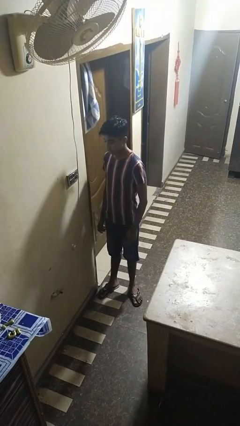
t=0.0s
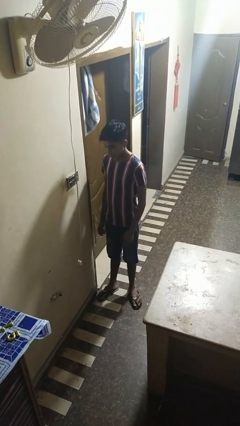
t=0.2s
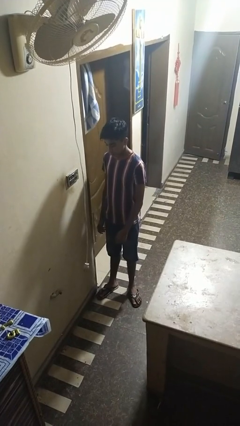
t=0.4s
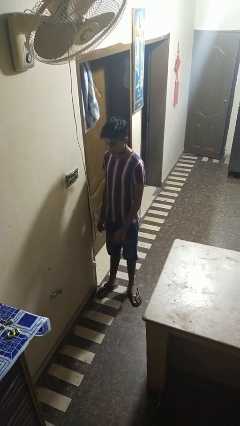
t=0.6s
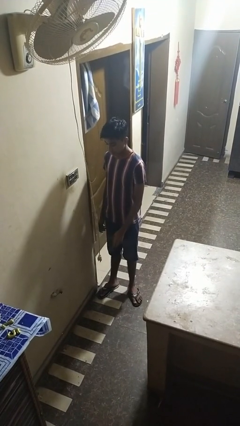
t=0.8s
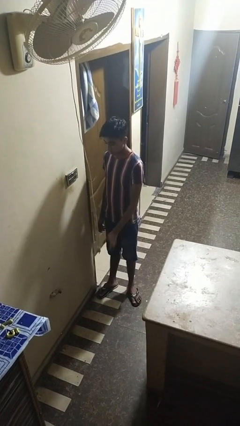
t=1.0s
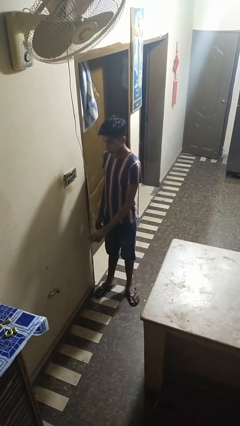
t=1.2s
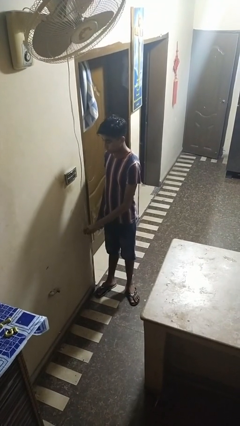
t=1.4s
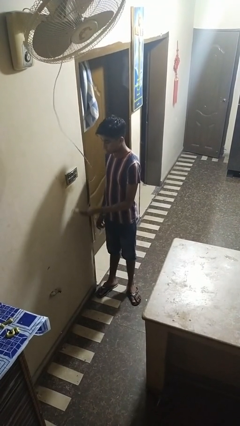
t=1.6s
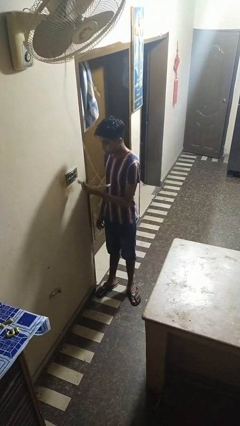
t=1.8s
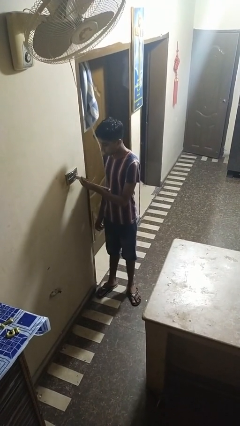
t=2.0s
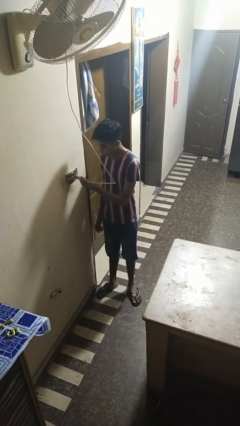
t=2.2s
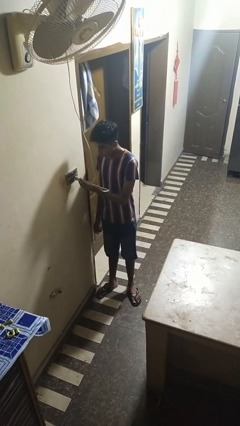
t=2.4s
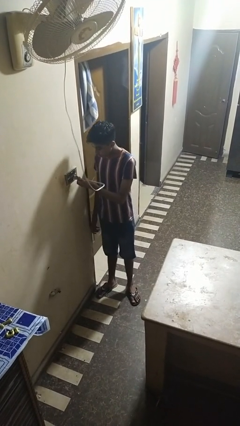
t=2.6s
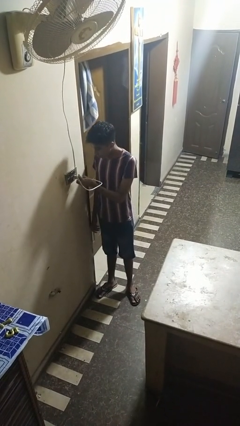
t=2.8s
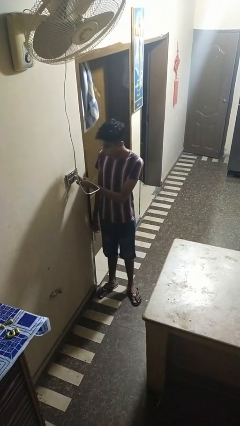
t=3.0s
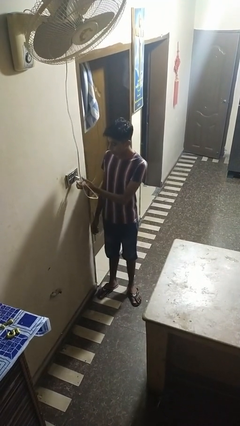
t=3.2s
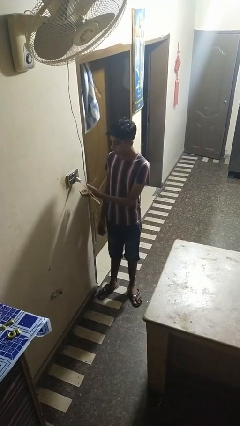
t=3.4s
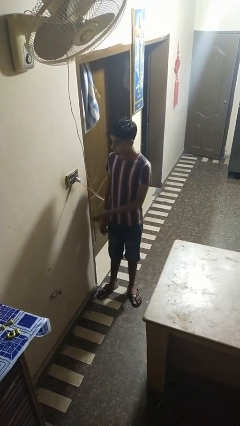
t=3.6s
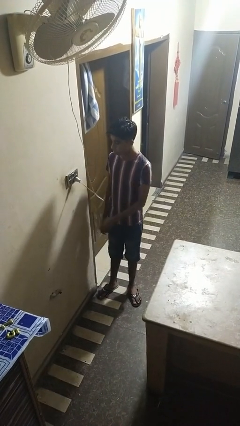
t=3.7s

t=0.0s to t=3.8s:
person plugs into electrical socket

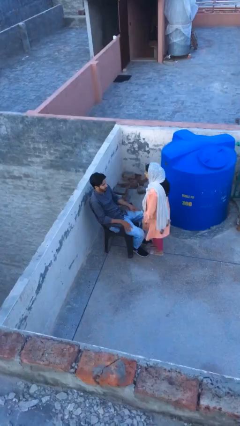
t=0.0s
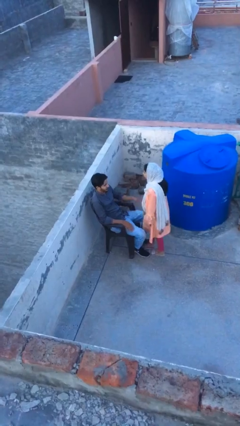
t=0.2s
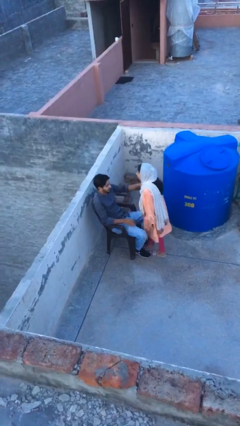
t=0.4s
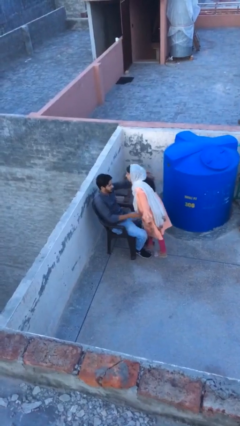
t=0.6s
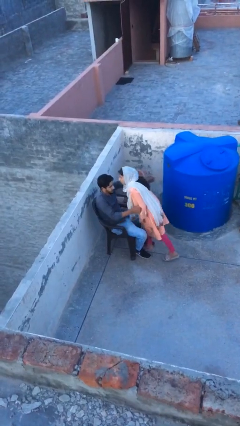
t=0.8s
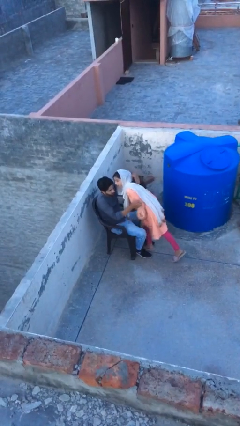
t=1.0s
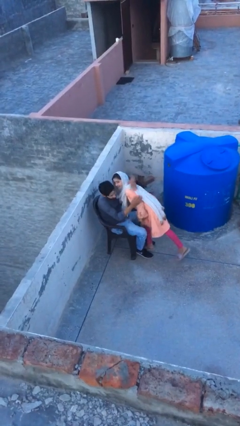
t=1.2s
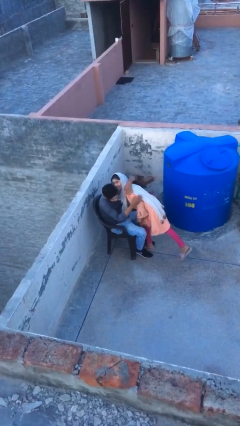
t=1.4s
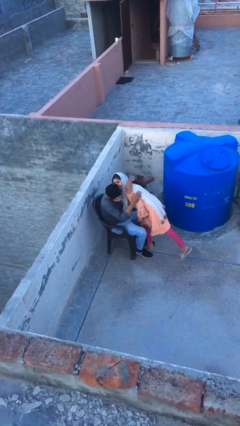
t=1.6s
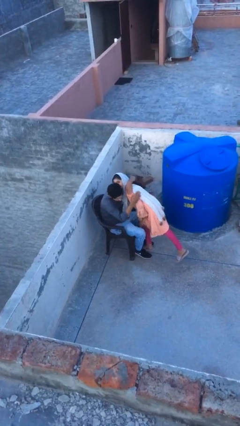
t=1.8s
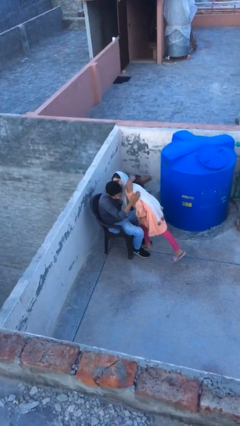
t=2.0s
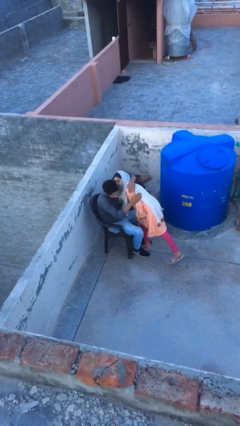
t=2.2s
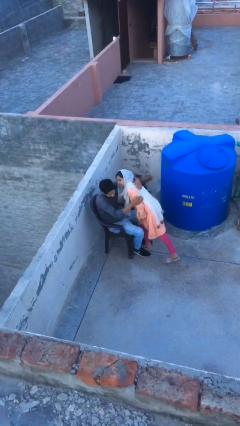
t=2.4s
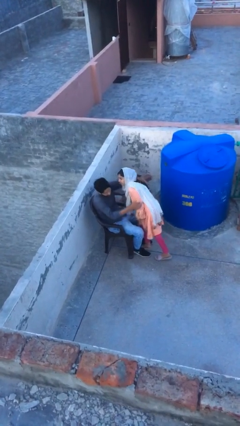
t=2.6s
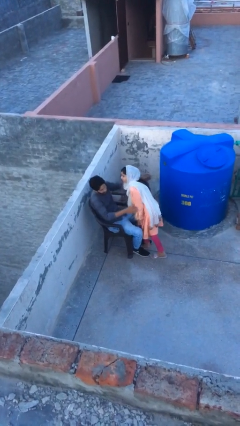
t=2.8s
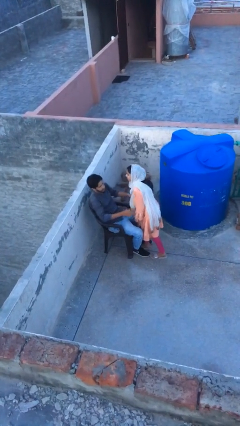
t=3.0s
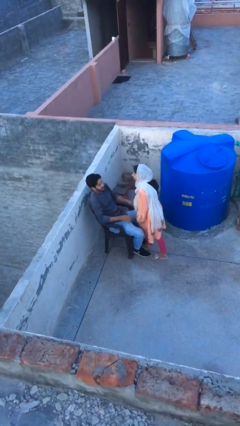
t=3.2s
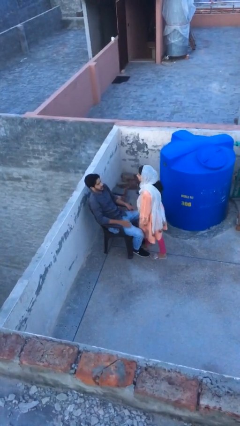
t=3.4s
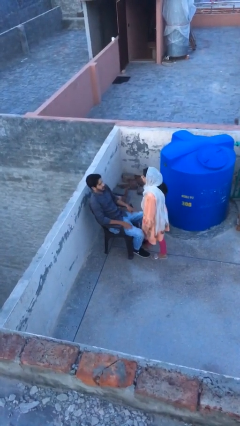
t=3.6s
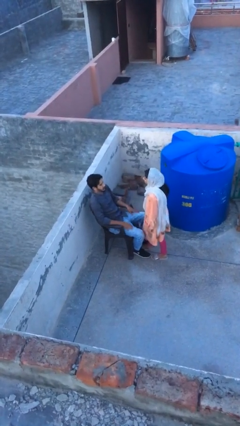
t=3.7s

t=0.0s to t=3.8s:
person embraces person

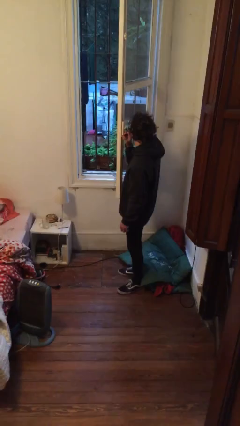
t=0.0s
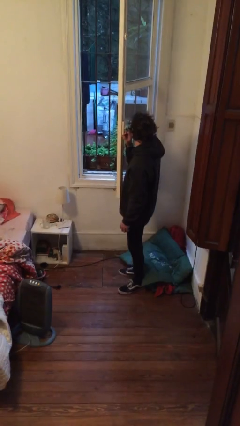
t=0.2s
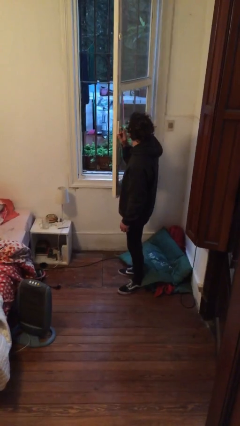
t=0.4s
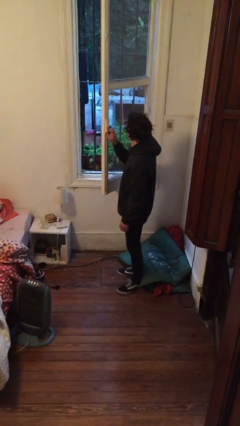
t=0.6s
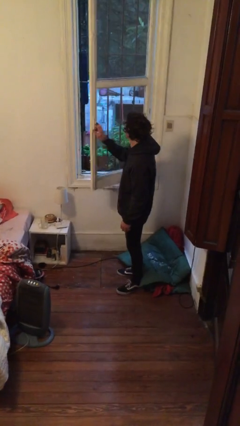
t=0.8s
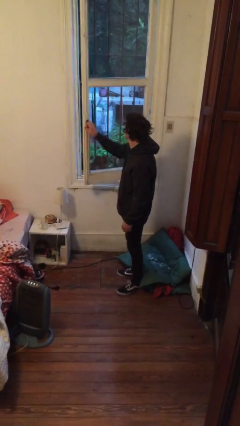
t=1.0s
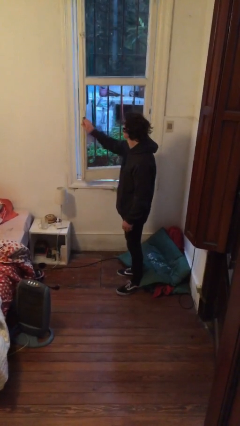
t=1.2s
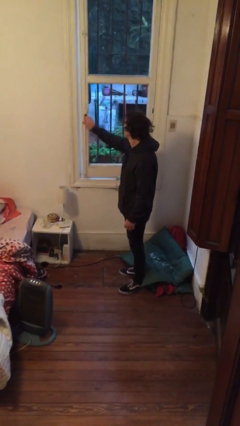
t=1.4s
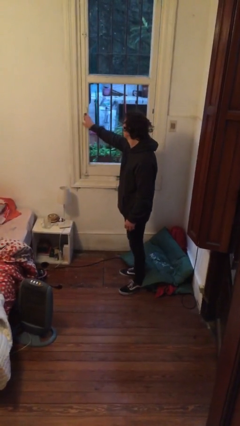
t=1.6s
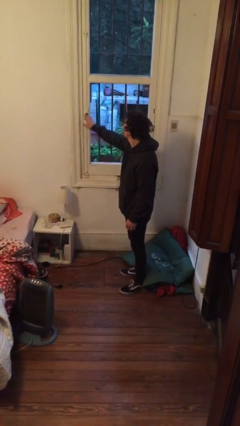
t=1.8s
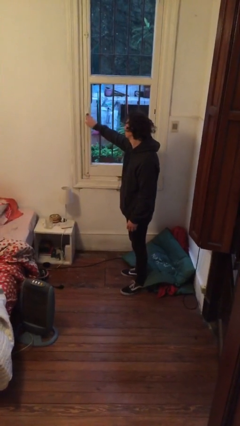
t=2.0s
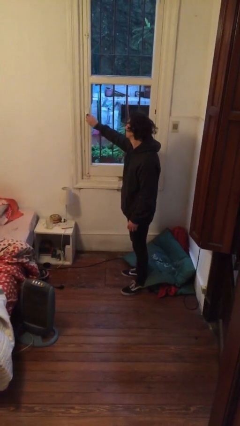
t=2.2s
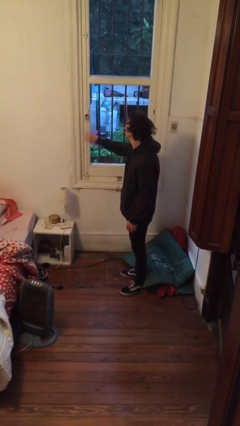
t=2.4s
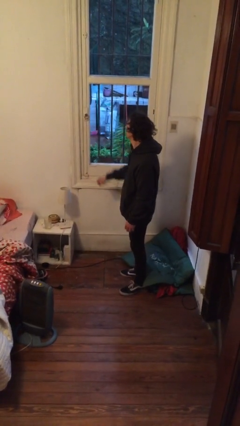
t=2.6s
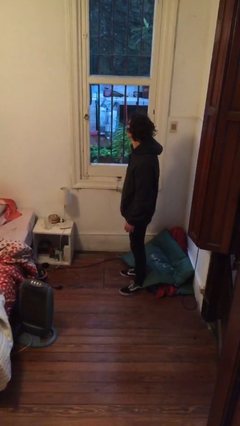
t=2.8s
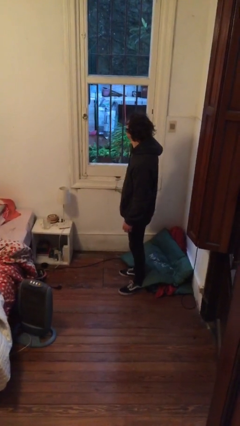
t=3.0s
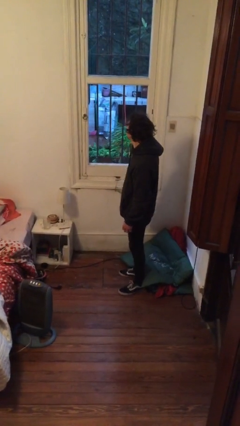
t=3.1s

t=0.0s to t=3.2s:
person closes home window

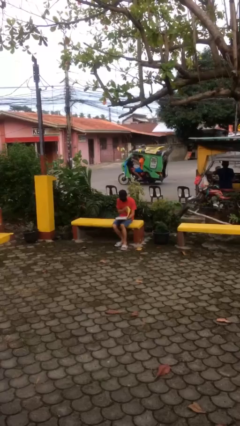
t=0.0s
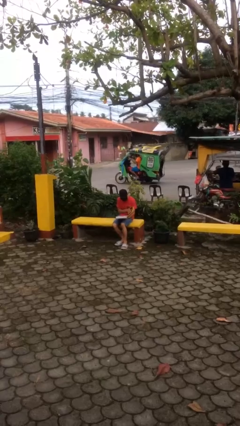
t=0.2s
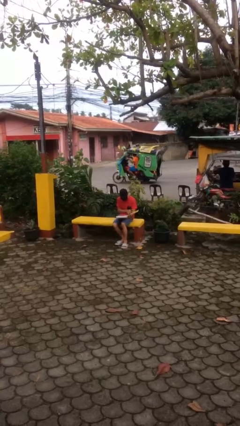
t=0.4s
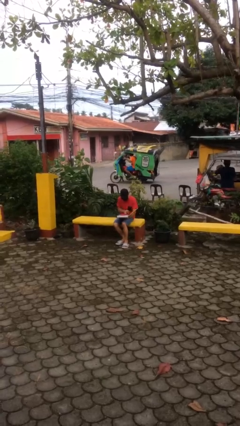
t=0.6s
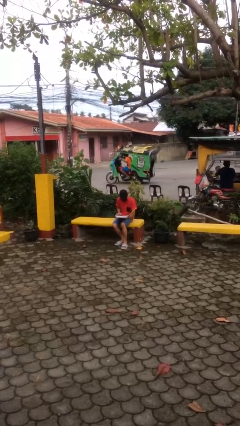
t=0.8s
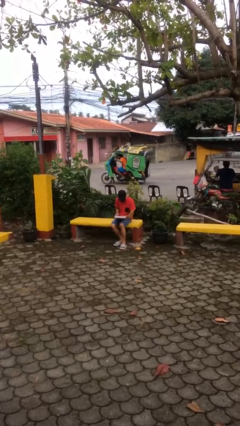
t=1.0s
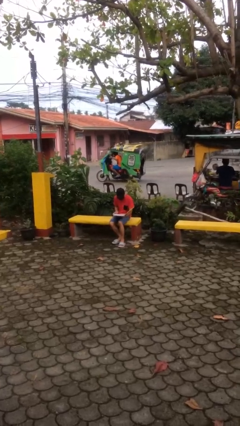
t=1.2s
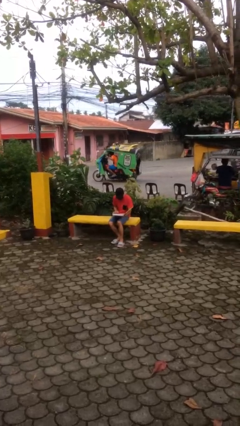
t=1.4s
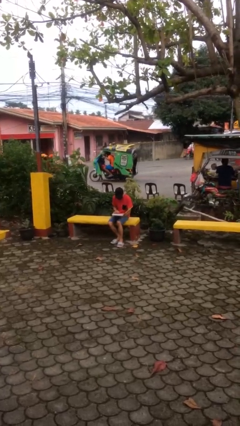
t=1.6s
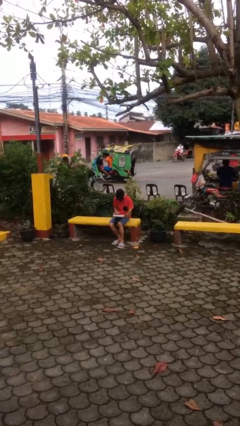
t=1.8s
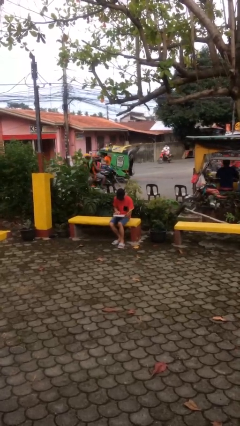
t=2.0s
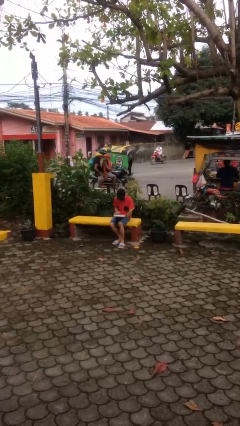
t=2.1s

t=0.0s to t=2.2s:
person reads document

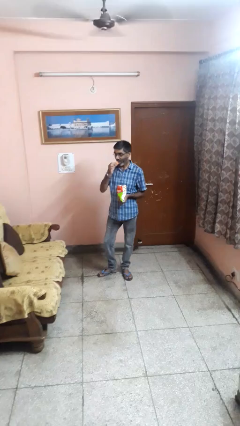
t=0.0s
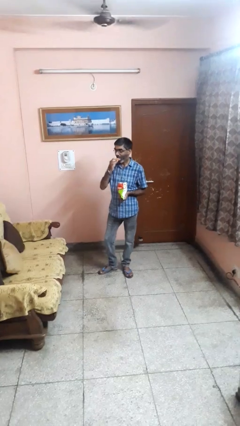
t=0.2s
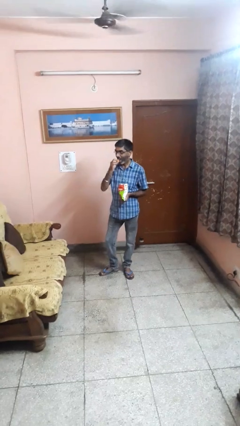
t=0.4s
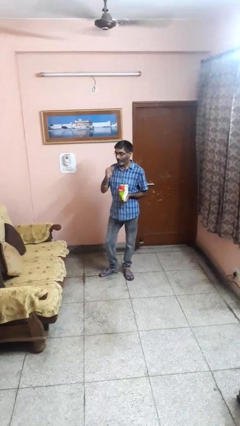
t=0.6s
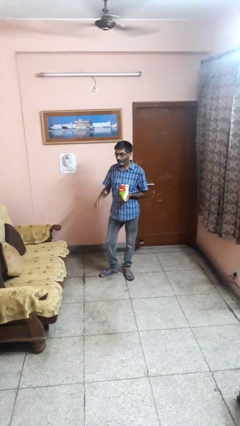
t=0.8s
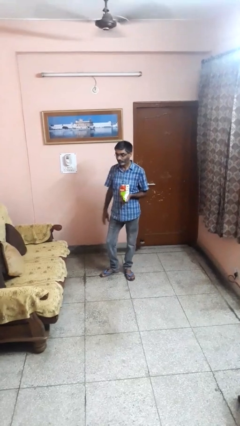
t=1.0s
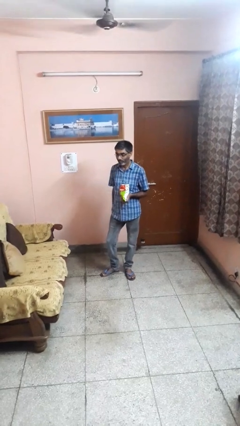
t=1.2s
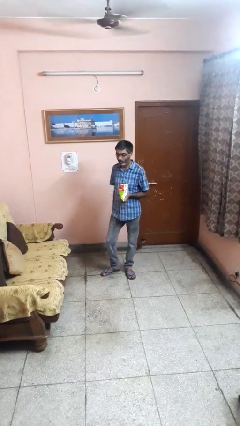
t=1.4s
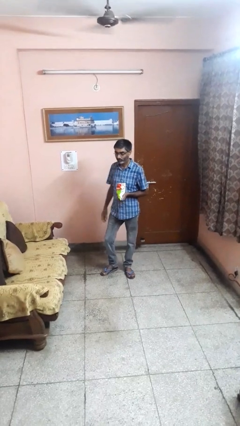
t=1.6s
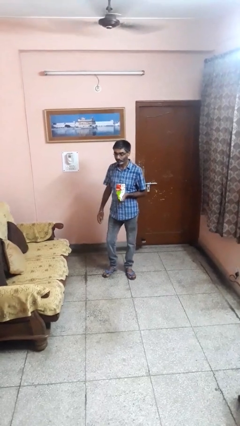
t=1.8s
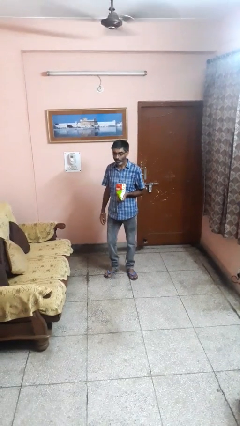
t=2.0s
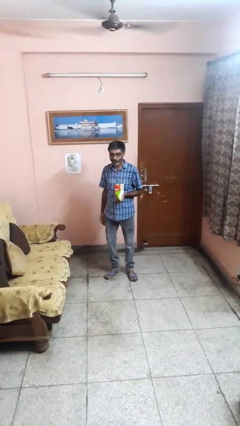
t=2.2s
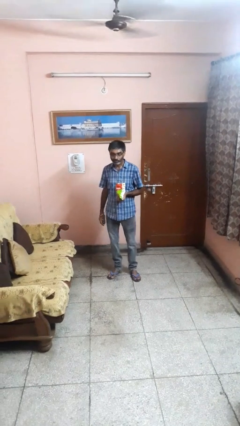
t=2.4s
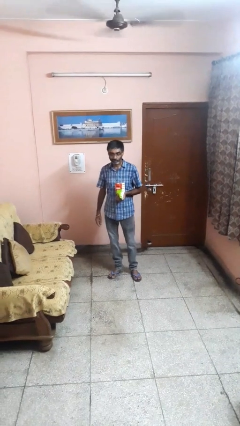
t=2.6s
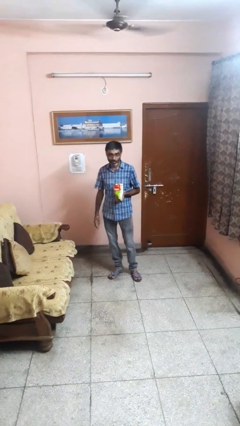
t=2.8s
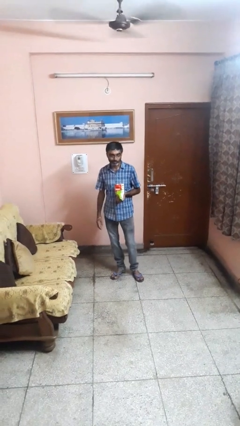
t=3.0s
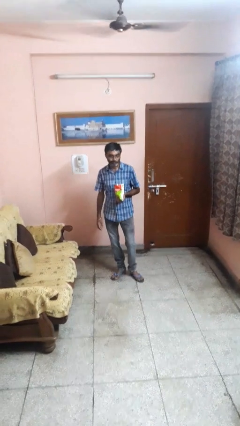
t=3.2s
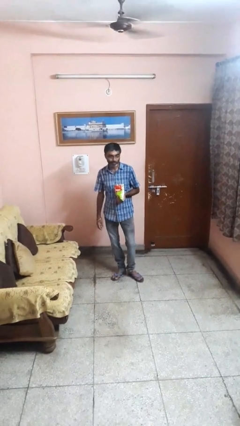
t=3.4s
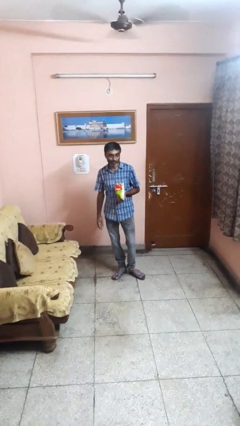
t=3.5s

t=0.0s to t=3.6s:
person eats snack from bag

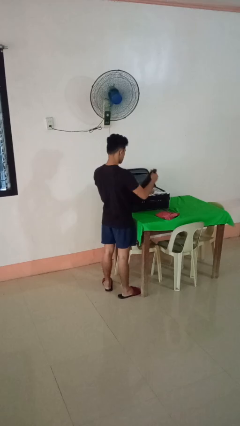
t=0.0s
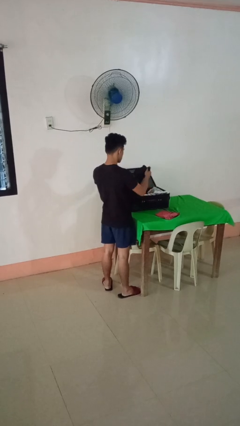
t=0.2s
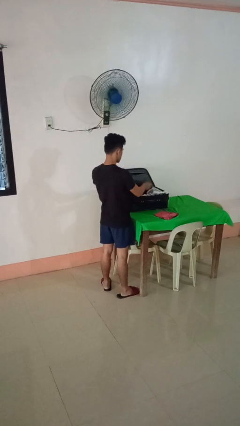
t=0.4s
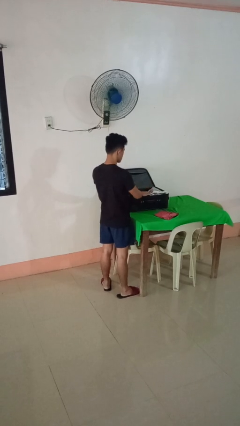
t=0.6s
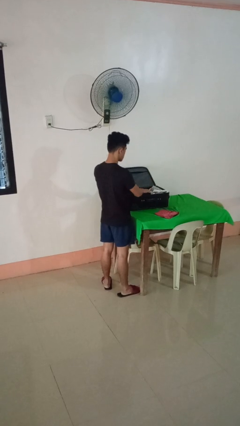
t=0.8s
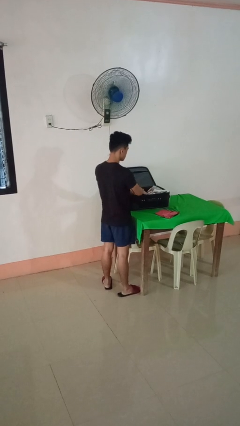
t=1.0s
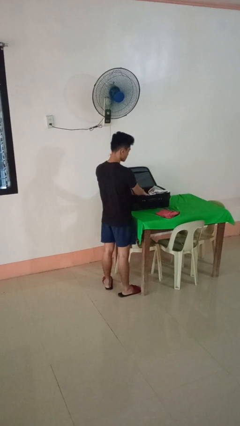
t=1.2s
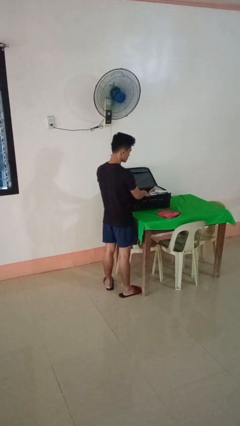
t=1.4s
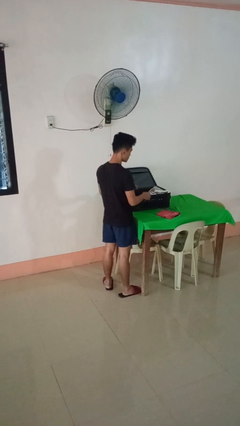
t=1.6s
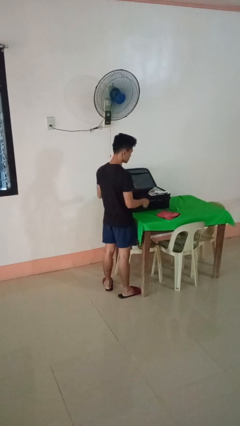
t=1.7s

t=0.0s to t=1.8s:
person loads clothes into suitcase
